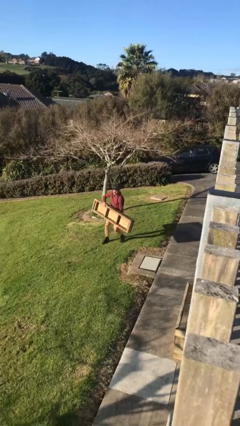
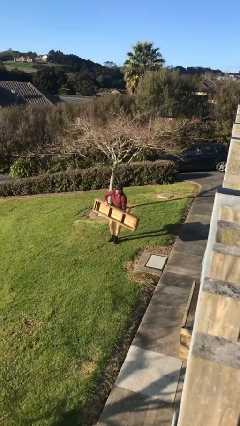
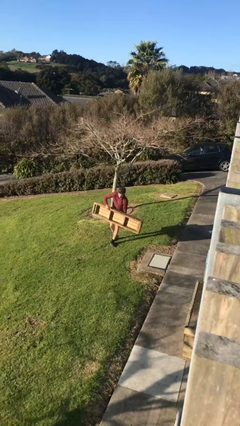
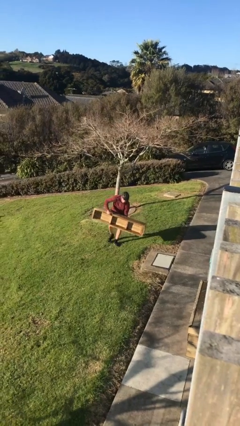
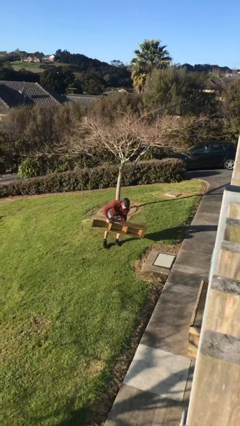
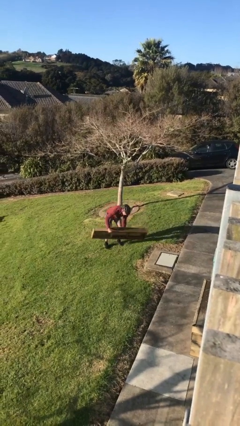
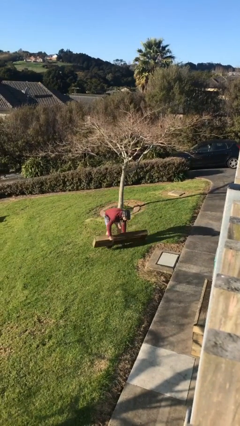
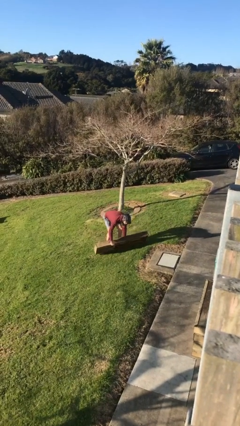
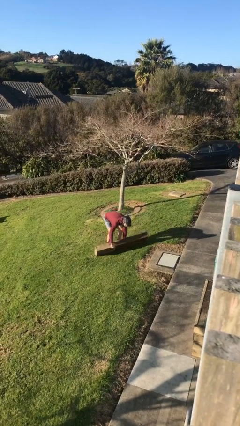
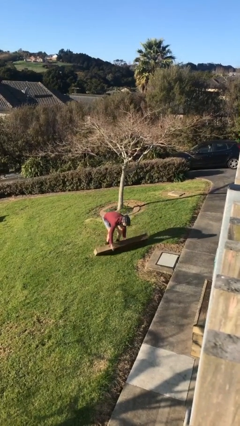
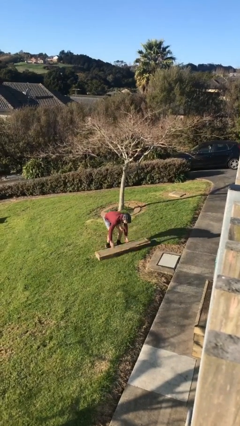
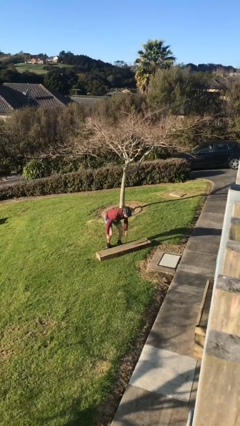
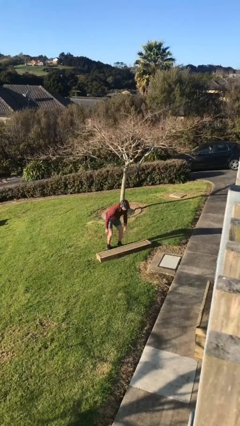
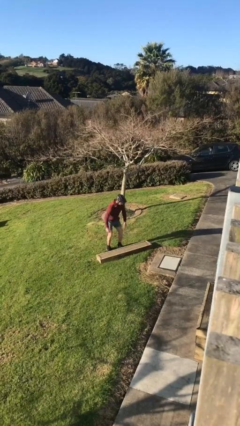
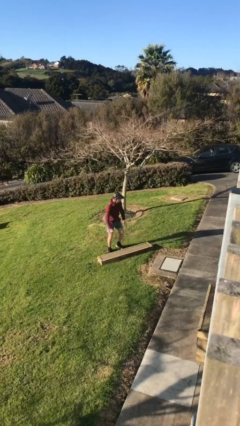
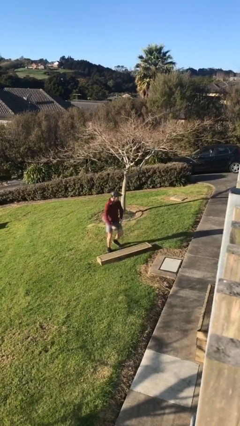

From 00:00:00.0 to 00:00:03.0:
person puts down object on floor

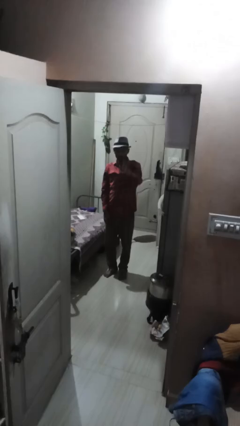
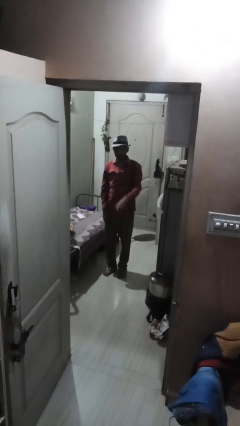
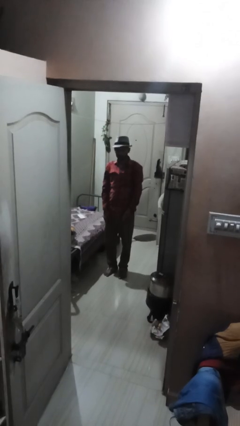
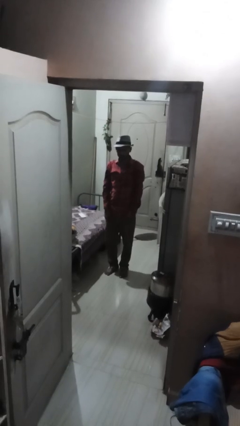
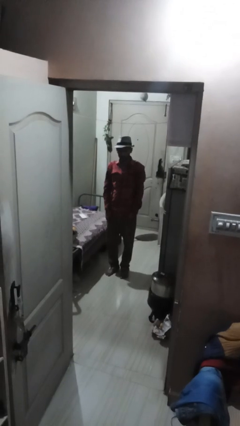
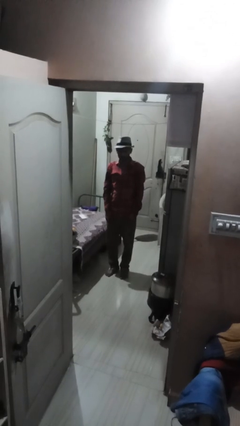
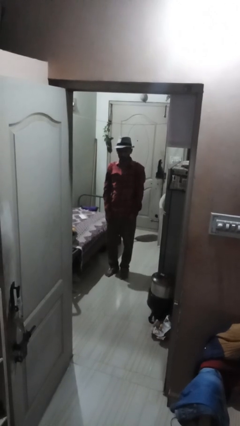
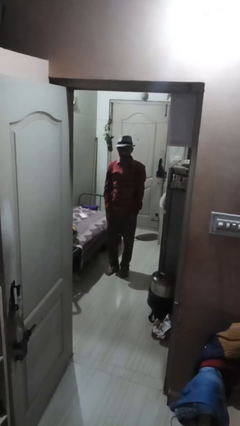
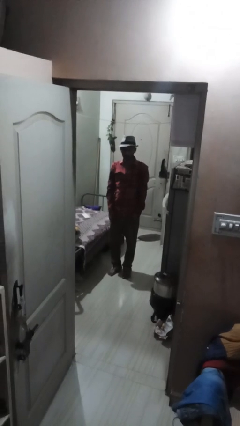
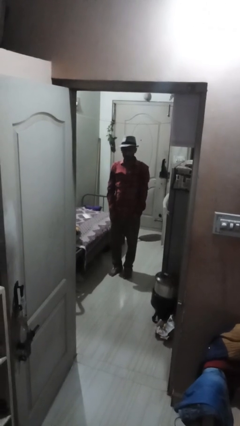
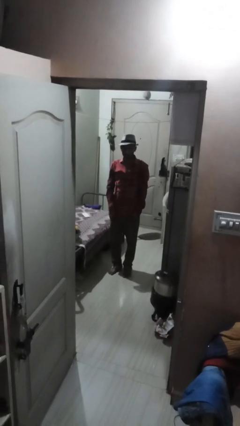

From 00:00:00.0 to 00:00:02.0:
person gestures swipe down

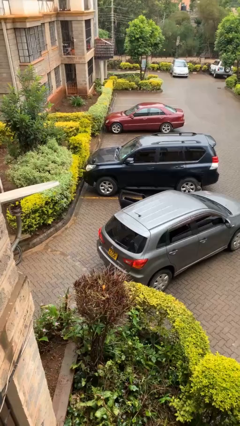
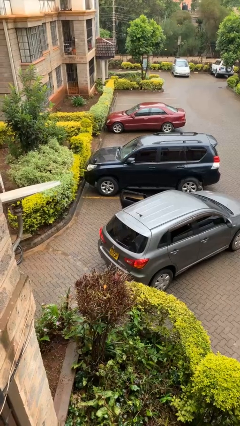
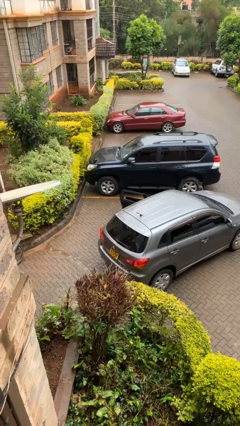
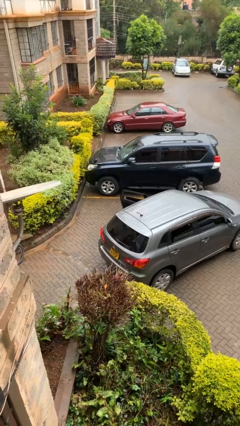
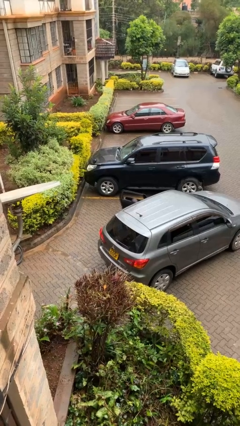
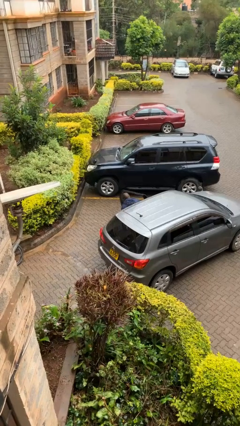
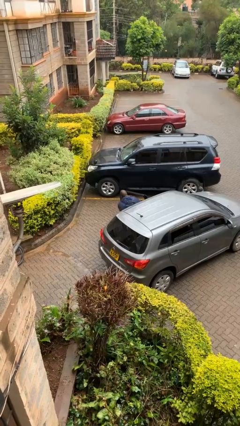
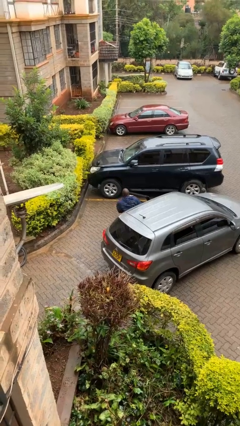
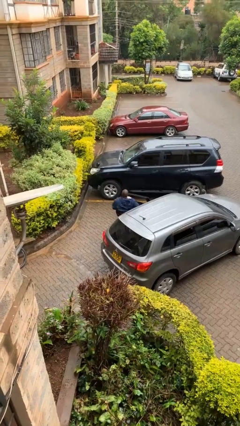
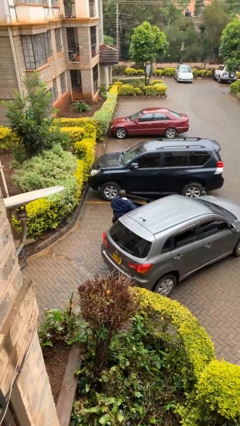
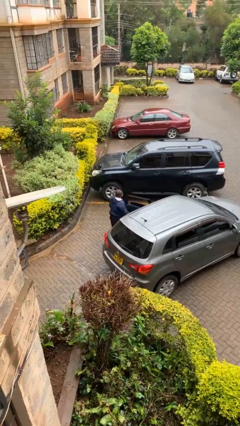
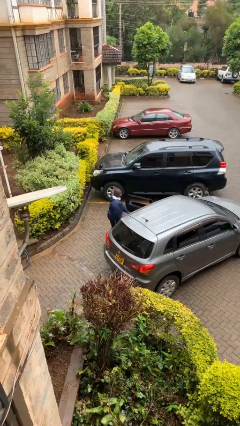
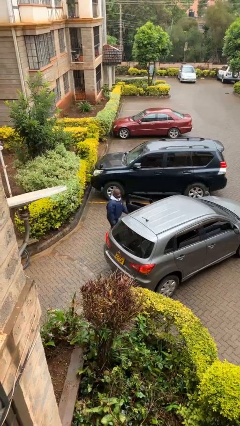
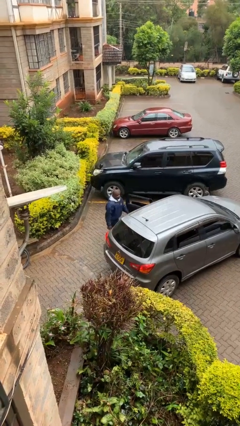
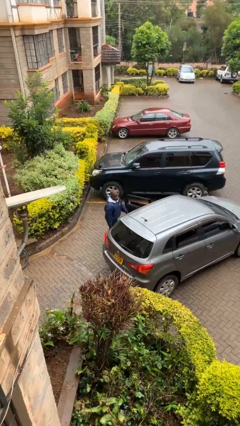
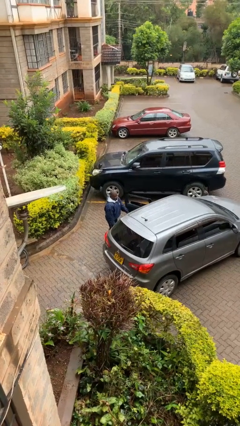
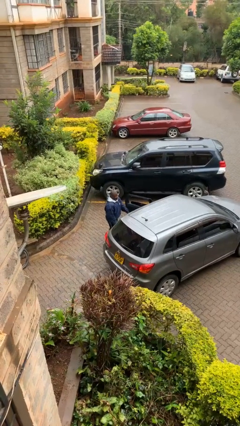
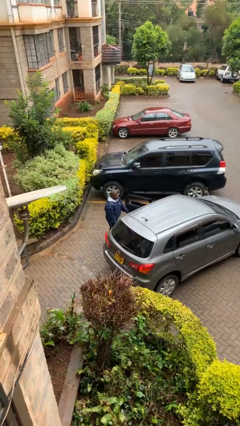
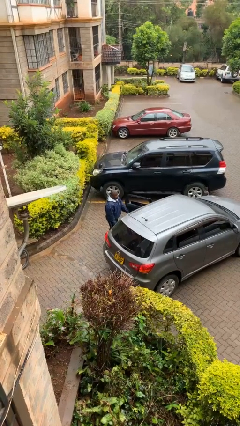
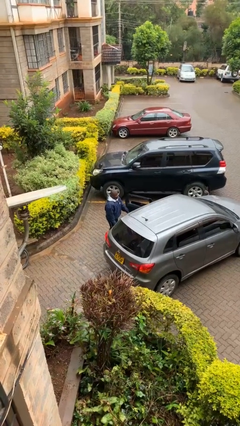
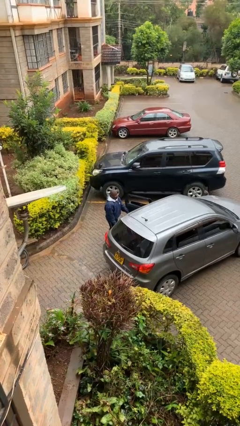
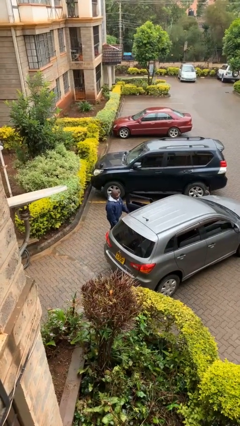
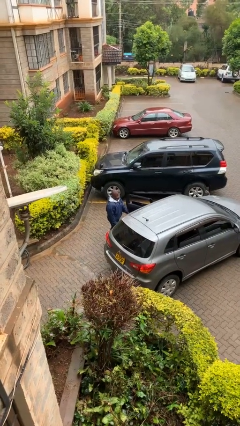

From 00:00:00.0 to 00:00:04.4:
person exits car

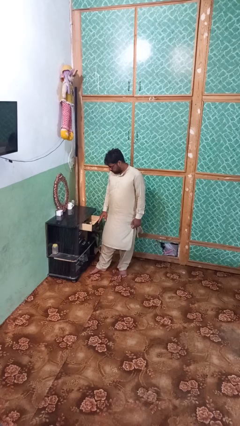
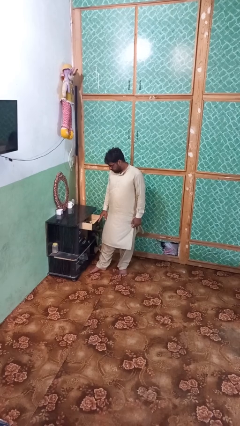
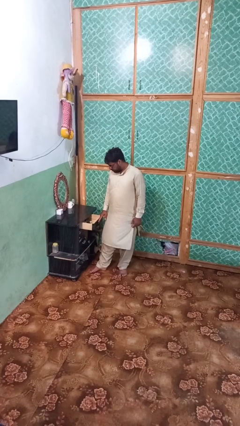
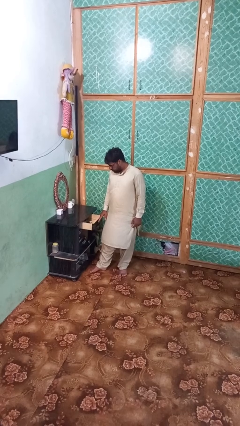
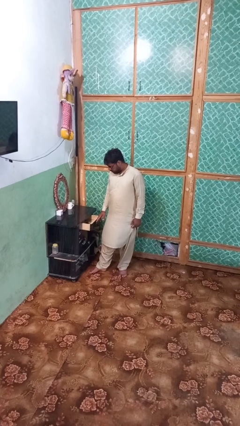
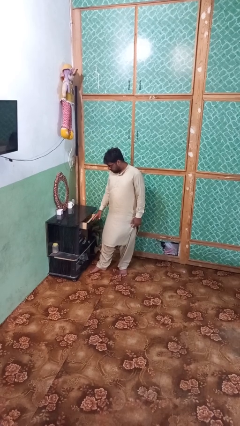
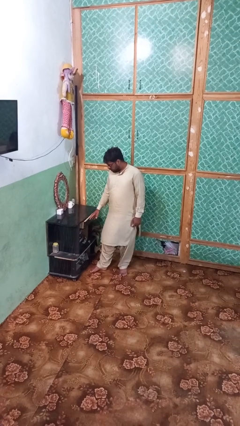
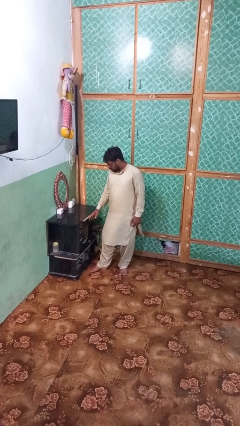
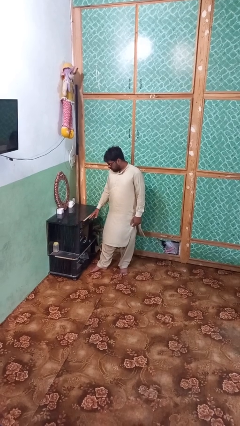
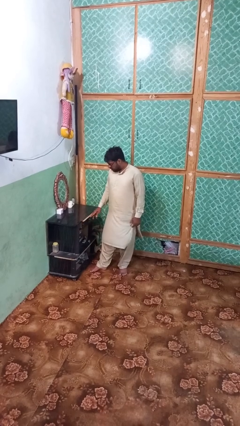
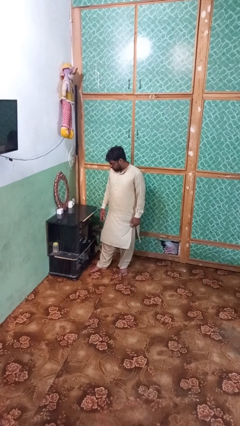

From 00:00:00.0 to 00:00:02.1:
person closes dresser drawer

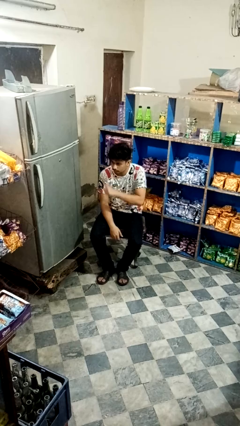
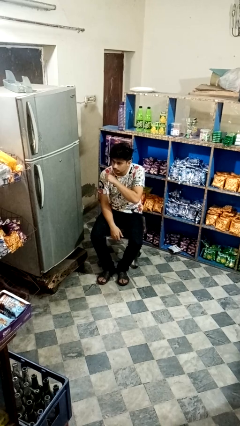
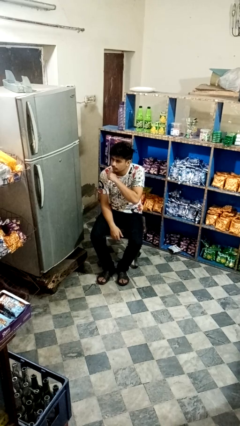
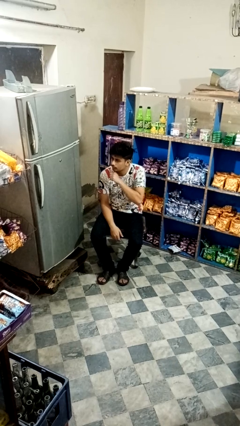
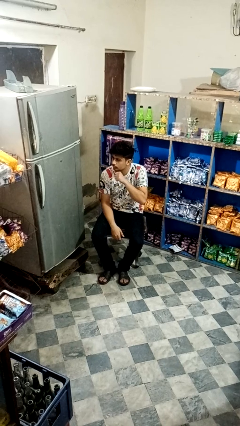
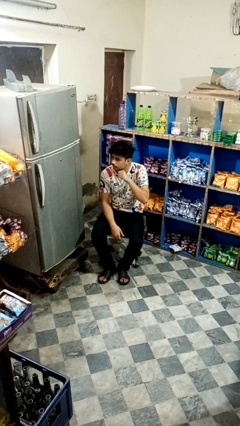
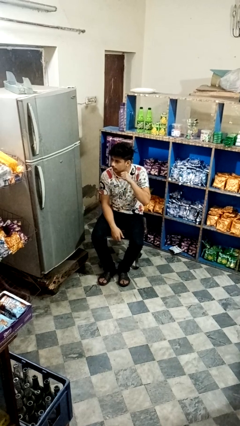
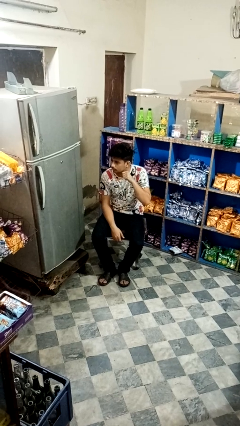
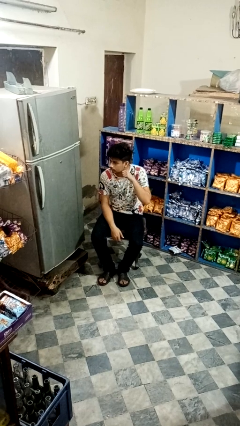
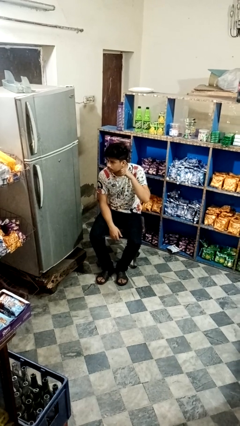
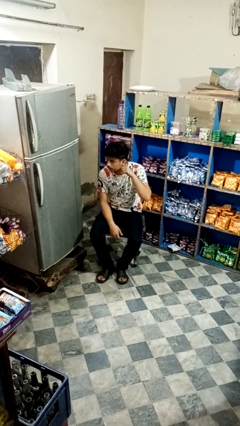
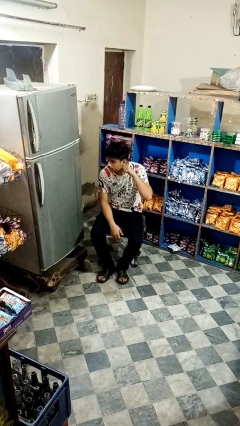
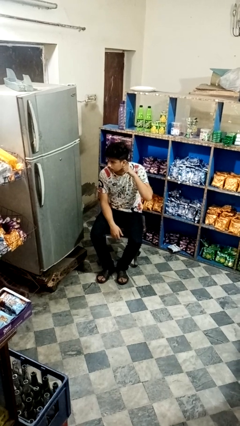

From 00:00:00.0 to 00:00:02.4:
person gestures cut

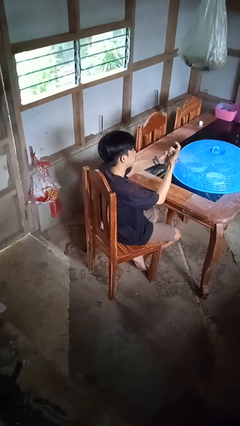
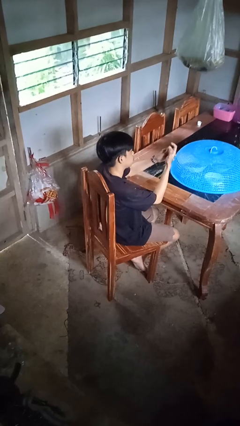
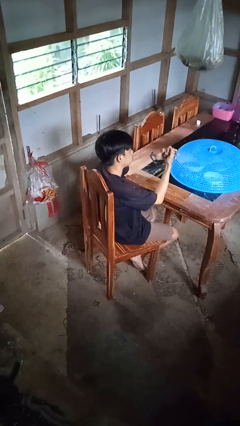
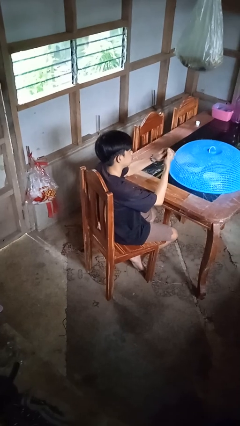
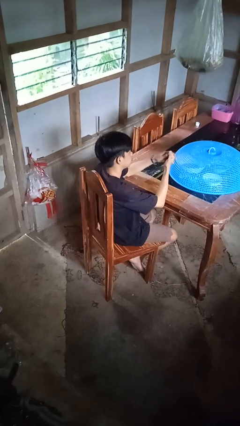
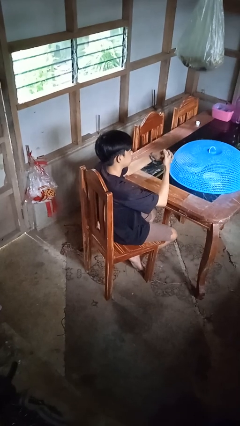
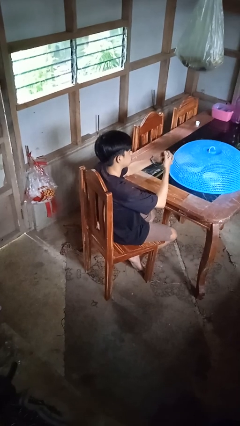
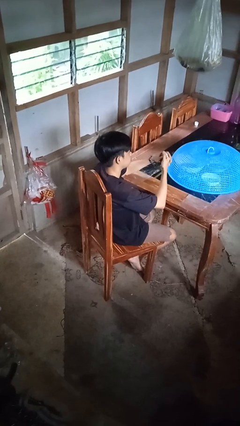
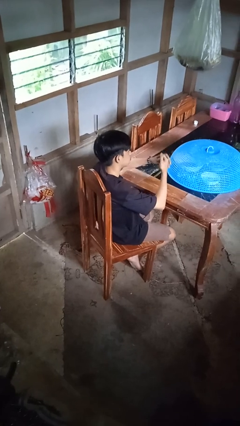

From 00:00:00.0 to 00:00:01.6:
person cracks knuckles

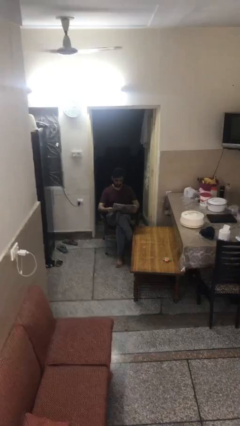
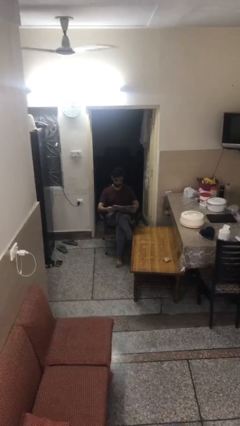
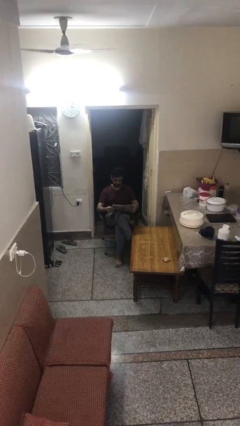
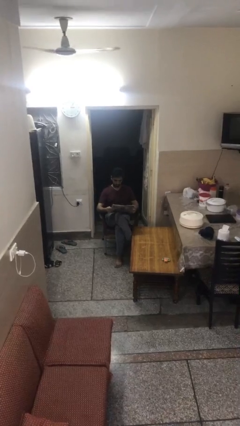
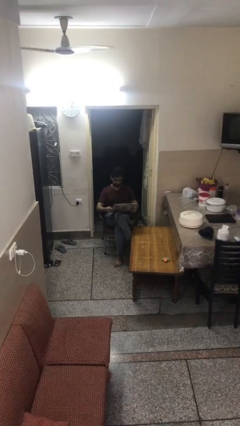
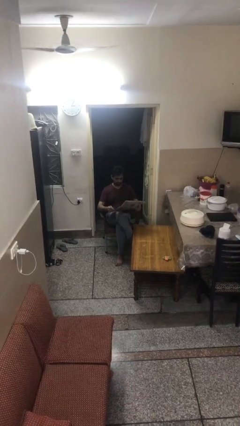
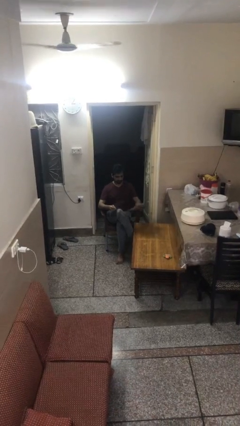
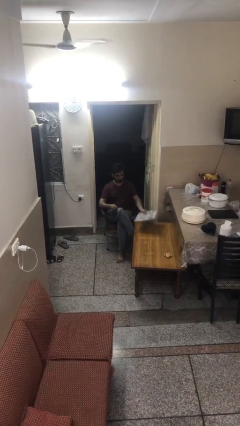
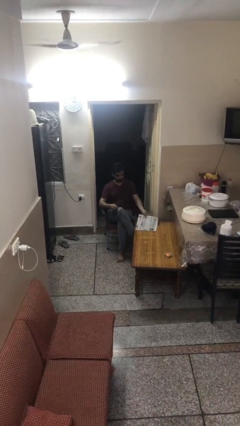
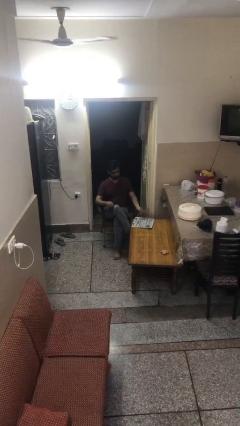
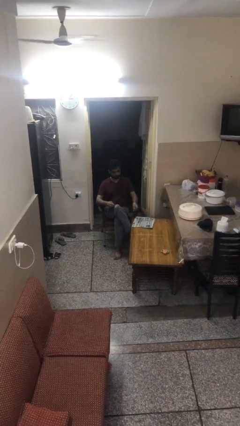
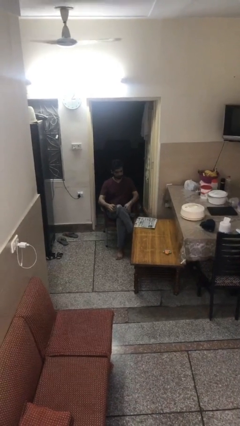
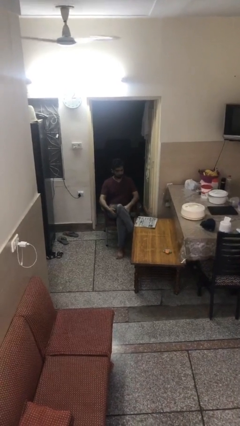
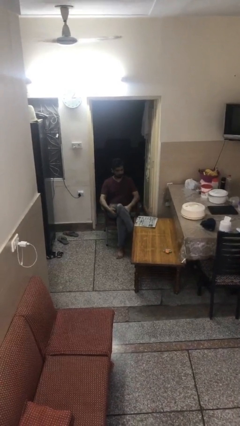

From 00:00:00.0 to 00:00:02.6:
person puts down object on table
